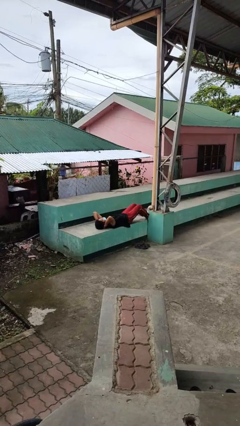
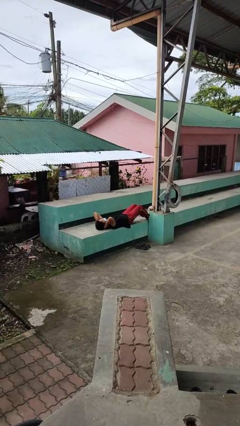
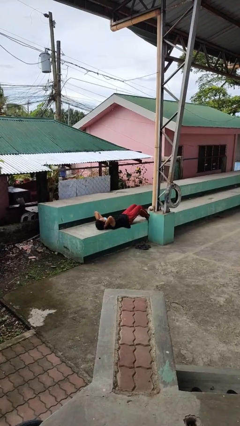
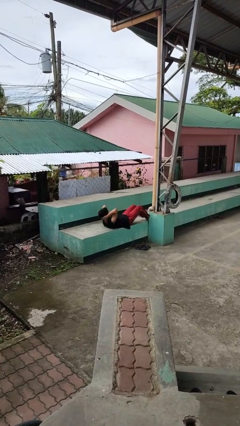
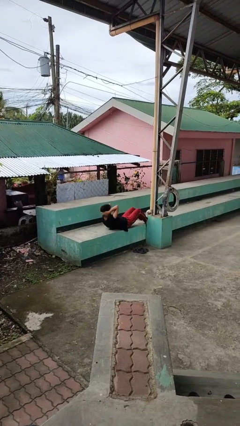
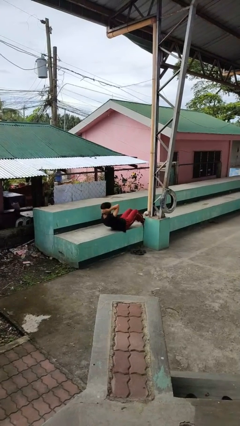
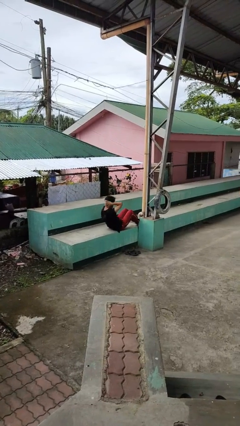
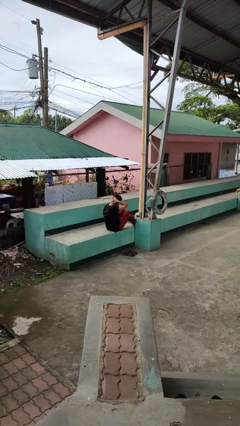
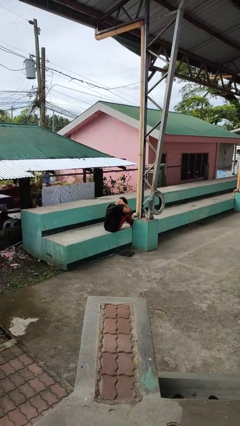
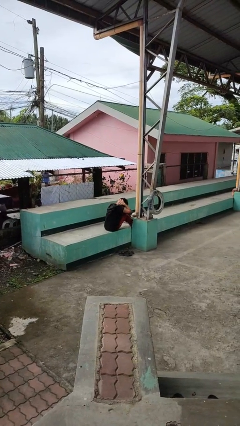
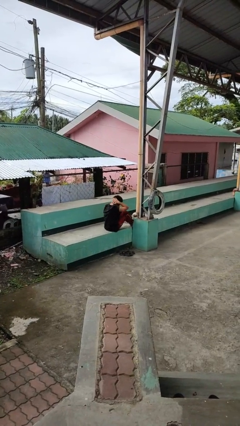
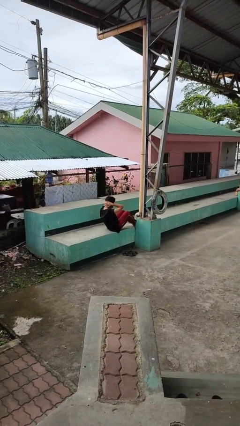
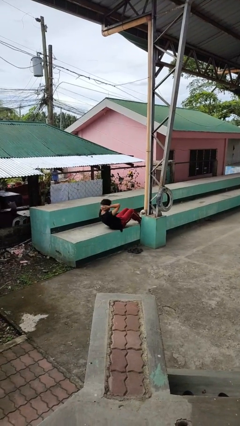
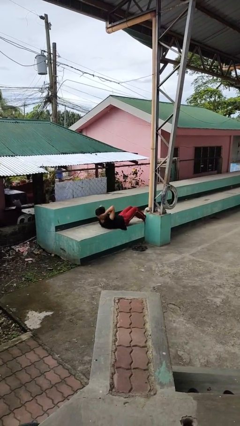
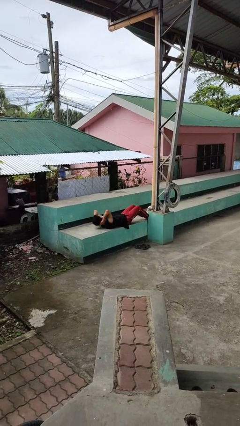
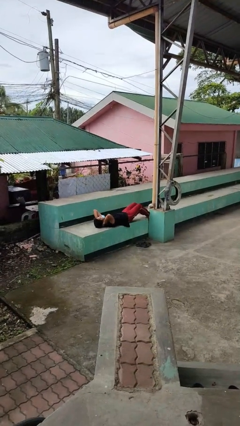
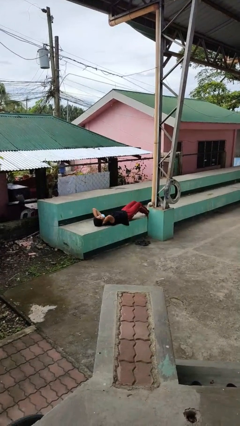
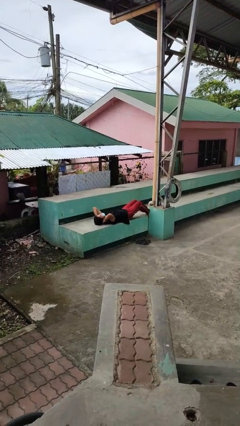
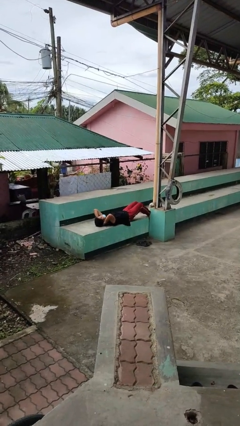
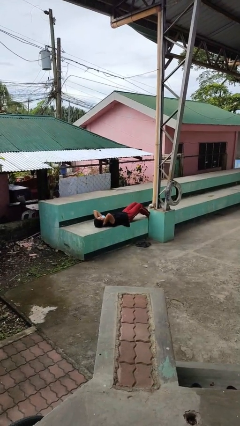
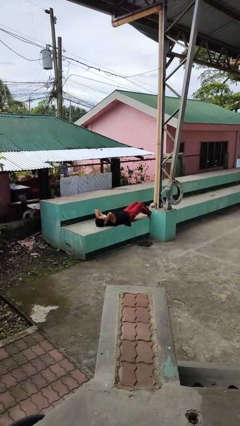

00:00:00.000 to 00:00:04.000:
person exercises with situp

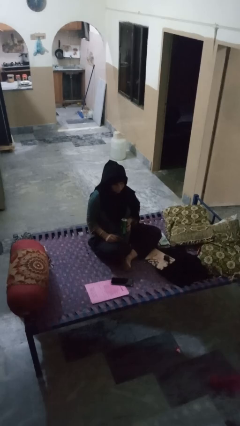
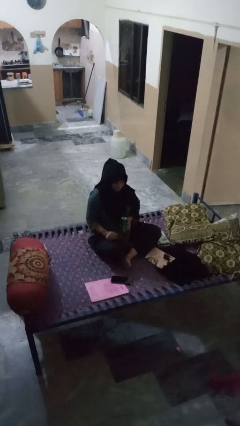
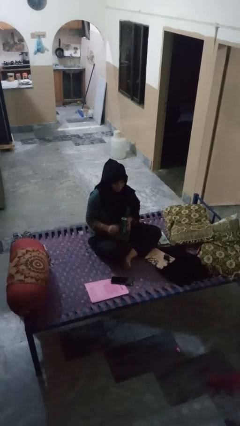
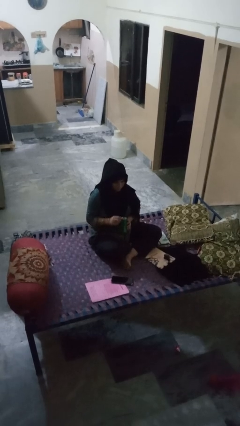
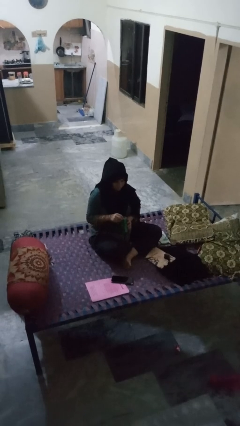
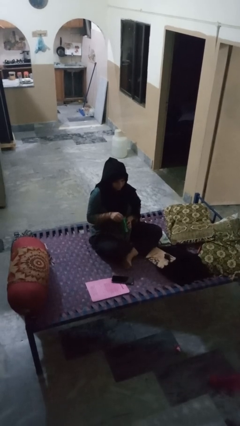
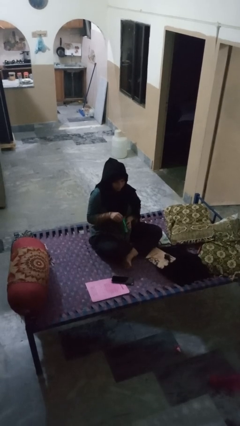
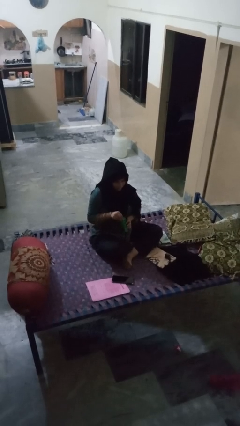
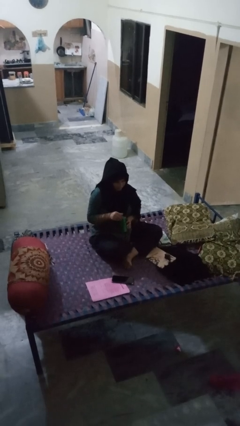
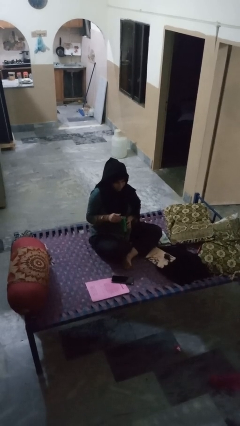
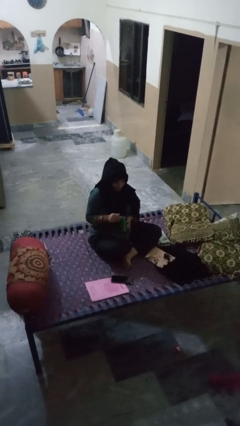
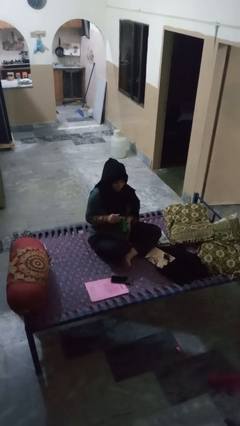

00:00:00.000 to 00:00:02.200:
person opens can with can opener

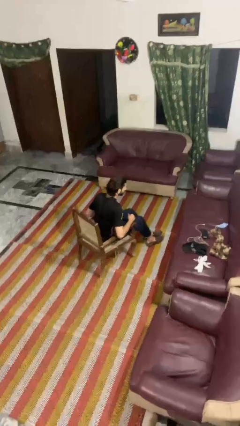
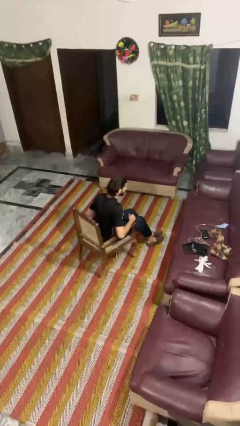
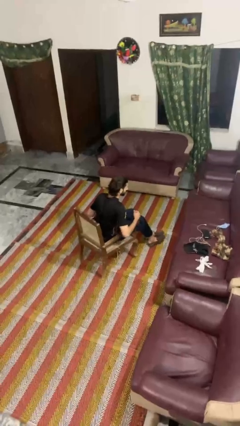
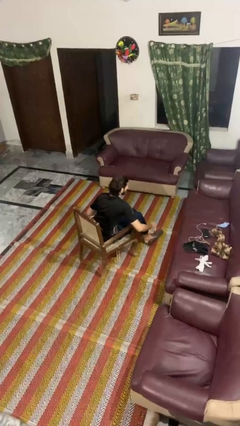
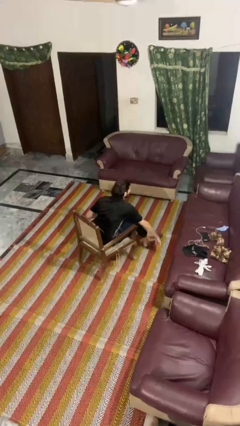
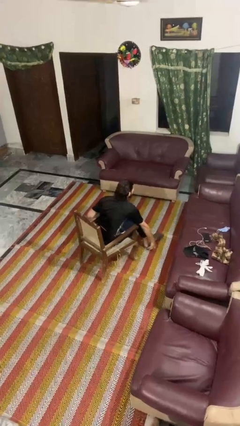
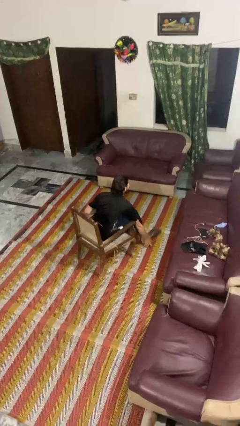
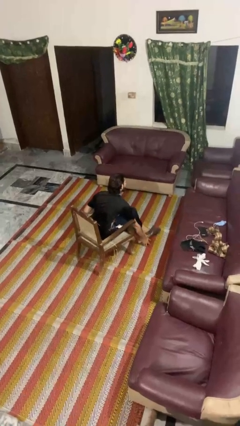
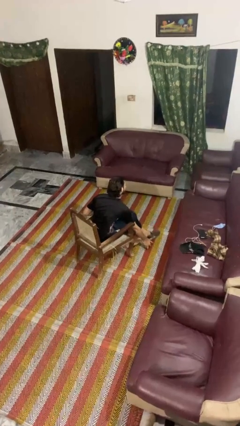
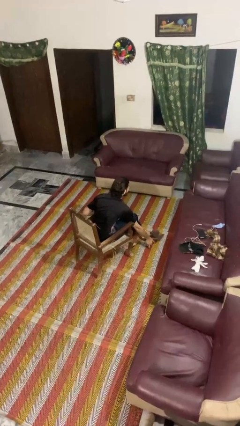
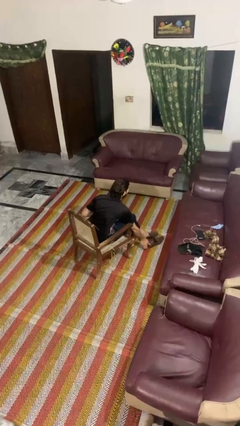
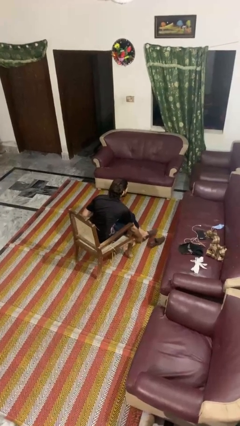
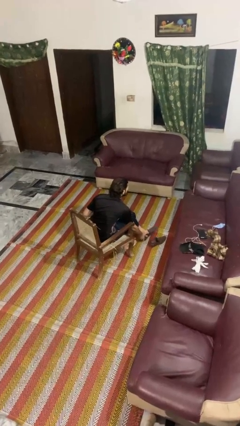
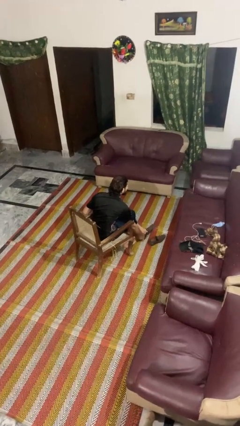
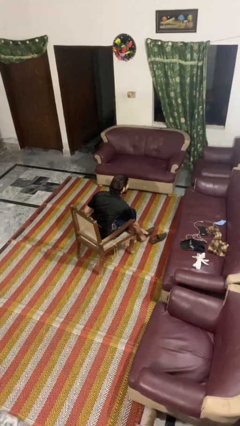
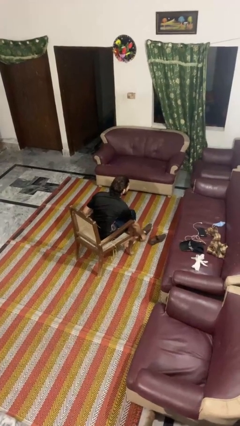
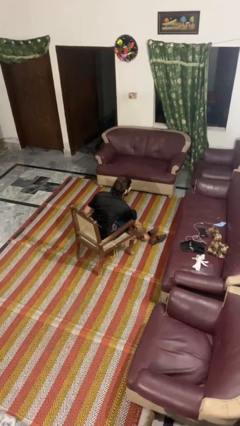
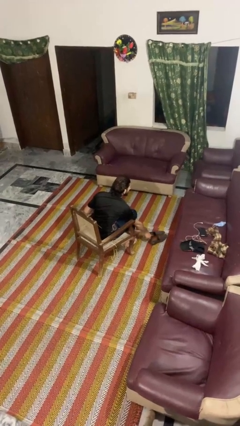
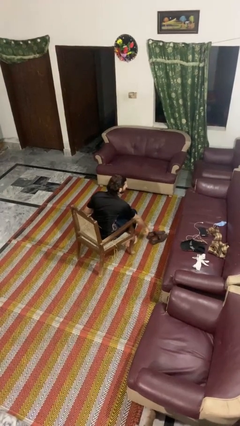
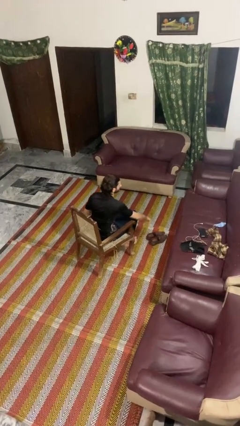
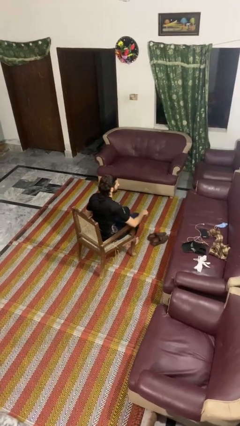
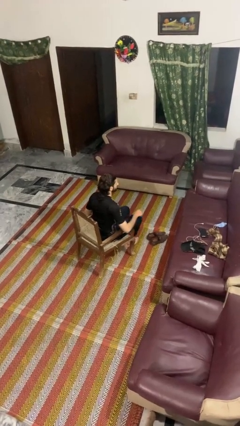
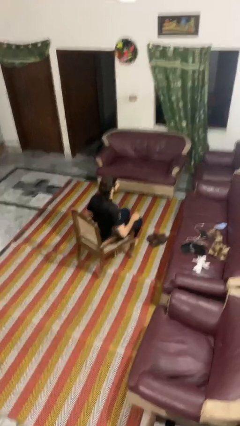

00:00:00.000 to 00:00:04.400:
person takes off shoes

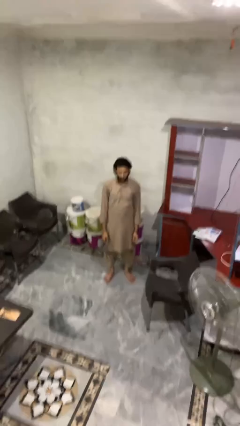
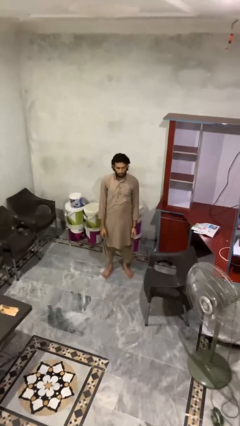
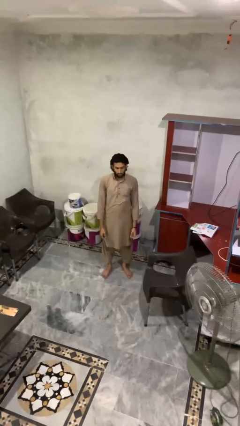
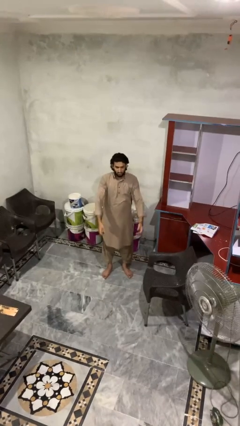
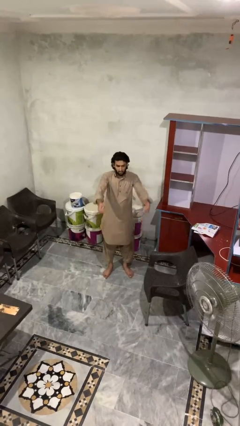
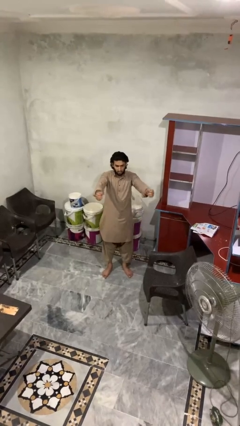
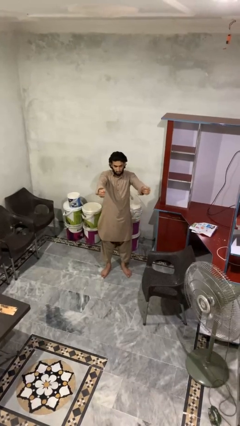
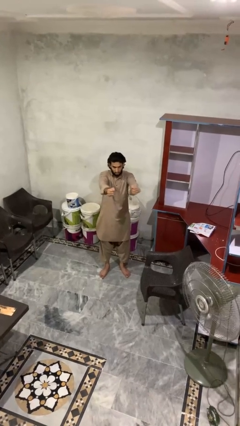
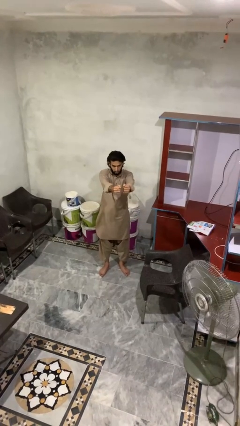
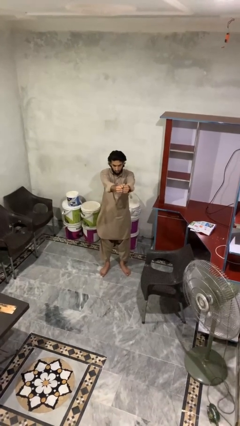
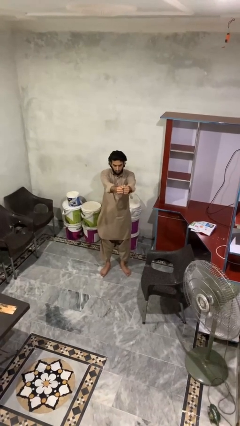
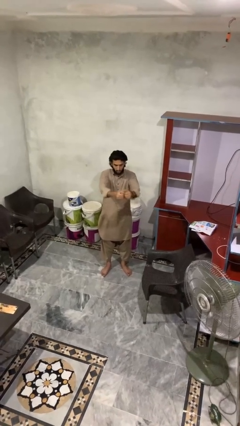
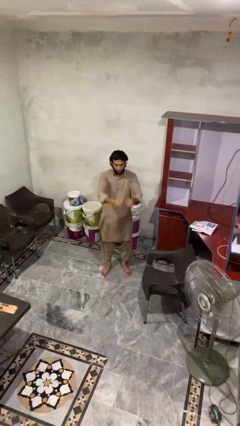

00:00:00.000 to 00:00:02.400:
person gestures zoom out

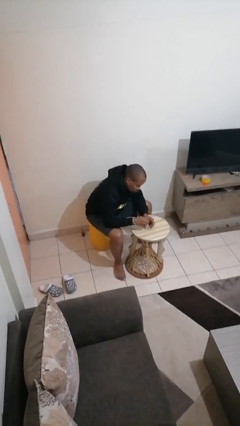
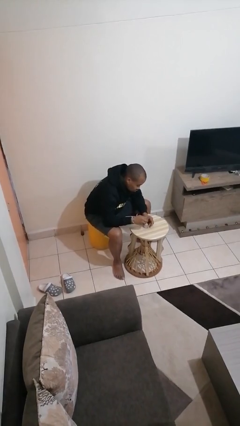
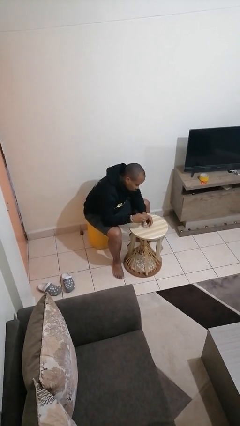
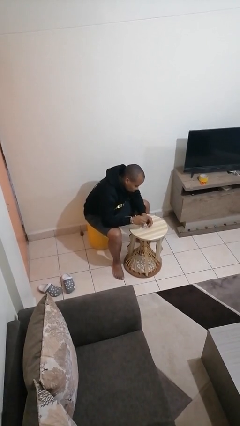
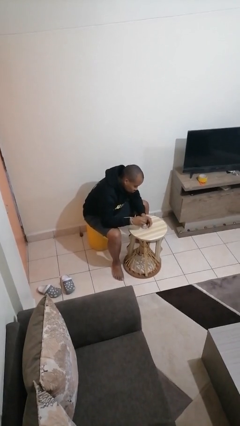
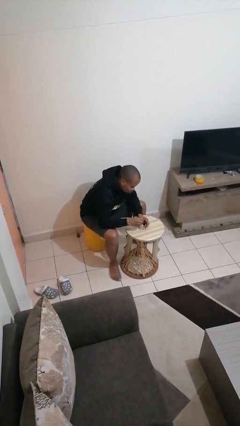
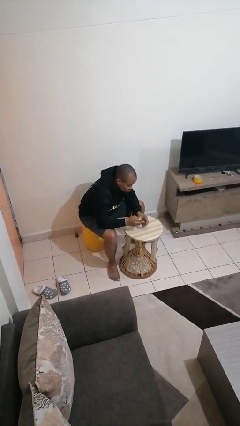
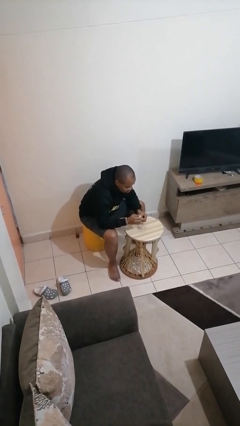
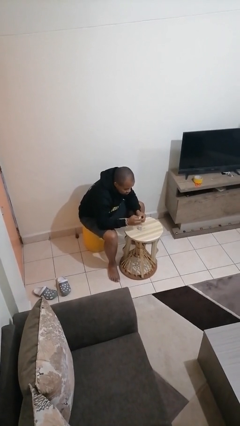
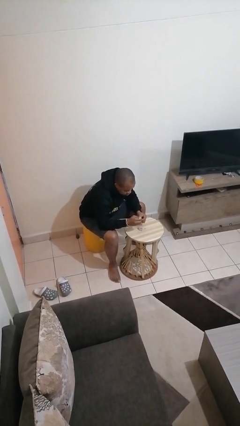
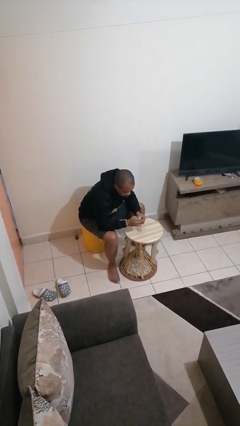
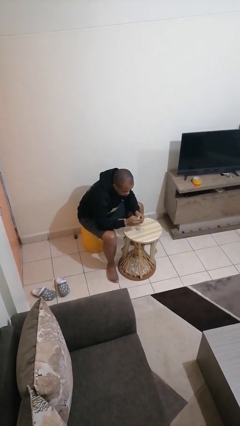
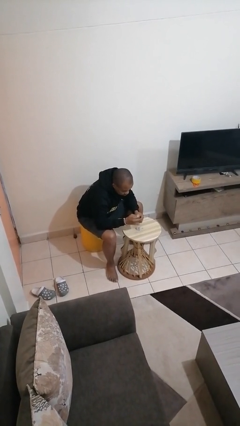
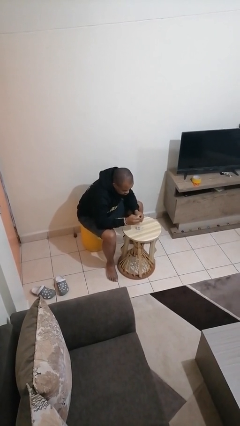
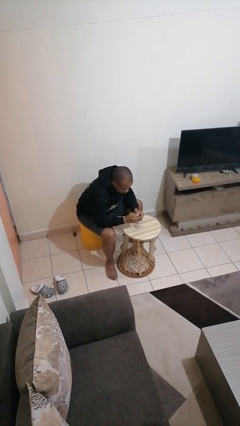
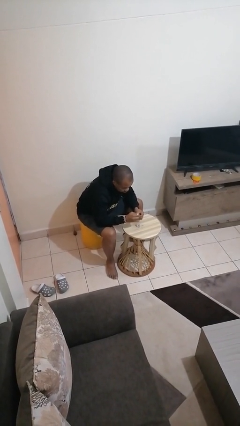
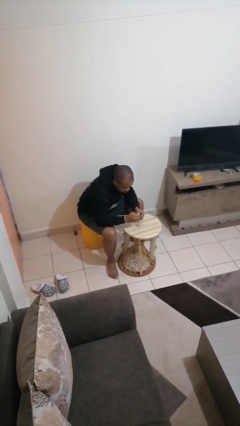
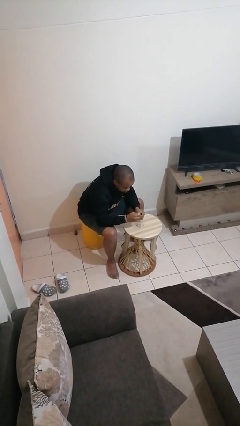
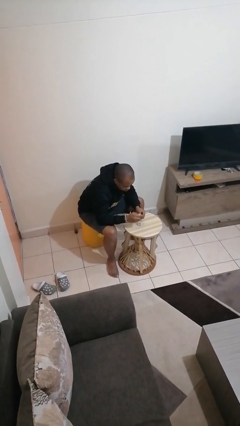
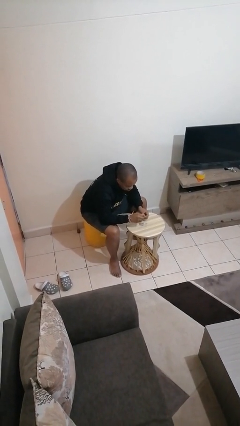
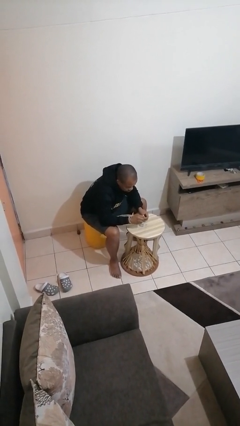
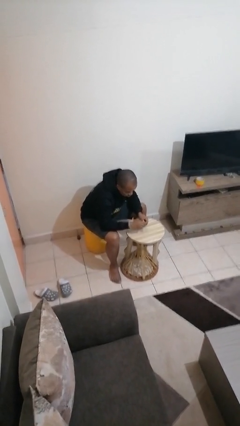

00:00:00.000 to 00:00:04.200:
person paints fingernails

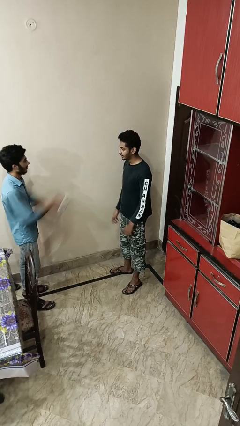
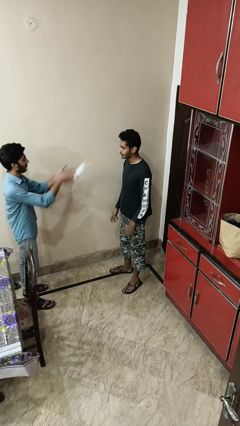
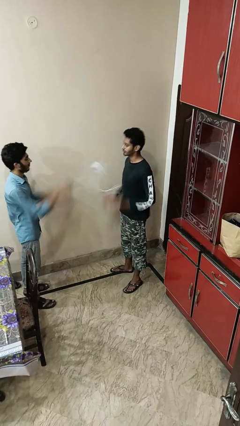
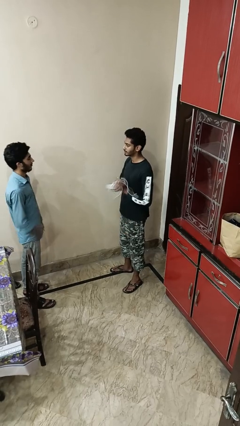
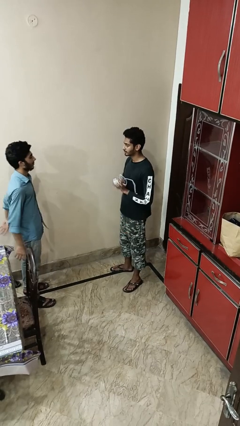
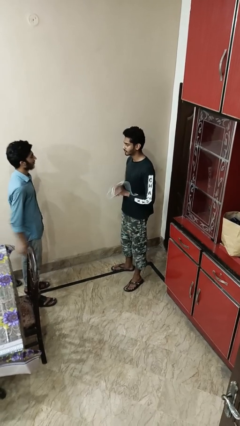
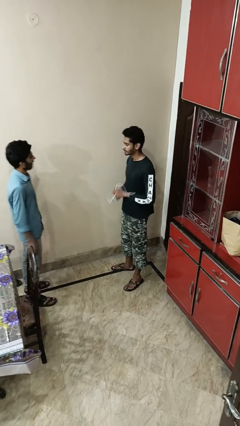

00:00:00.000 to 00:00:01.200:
person catches object from person
